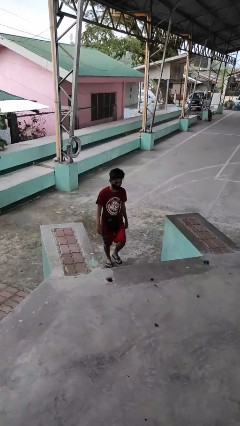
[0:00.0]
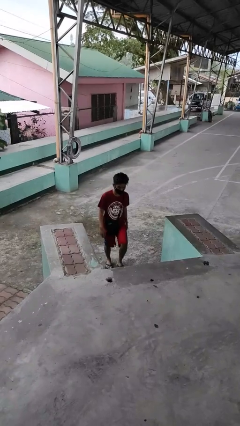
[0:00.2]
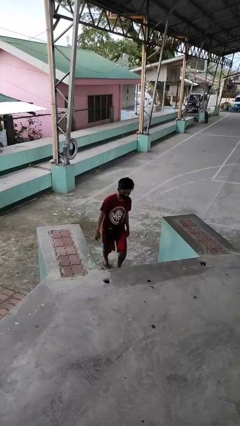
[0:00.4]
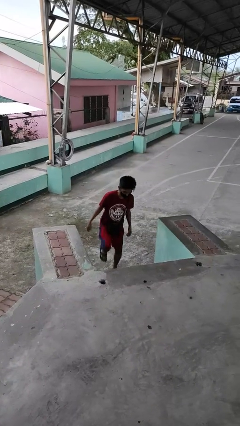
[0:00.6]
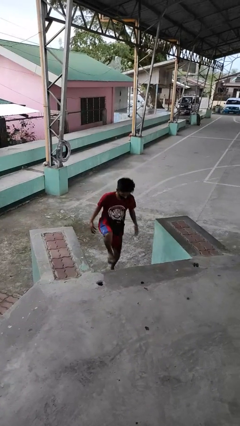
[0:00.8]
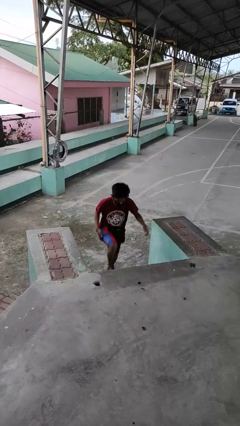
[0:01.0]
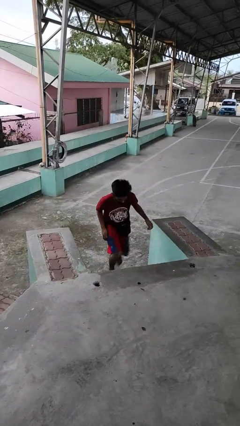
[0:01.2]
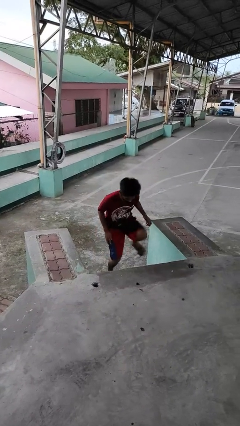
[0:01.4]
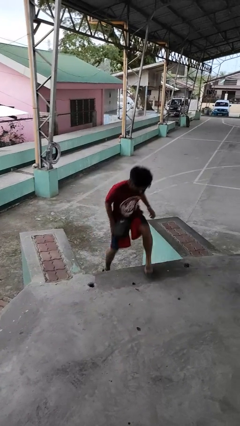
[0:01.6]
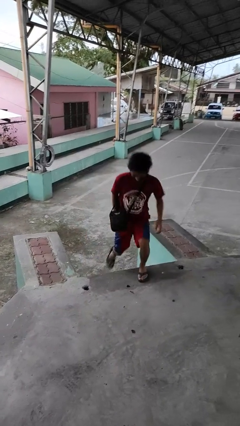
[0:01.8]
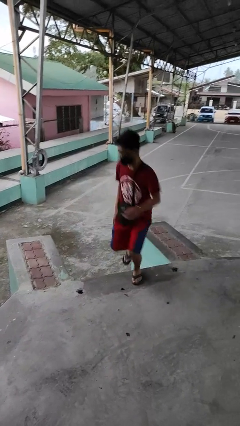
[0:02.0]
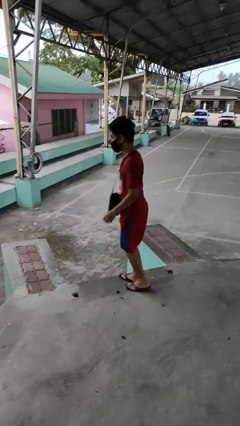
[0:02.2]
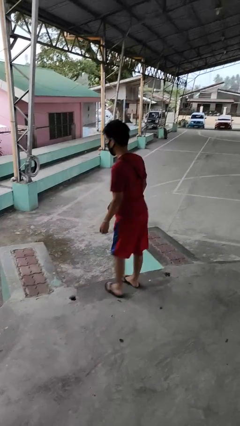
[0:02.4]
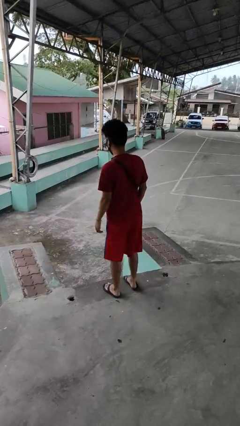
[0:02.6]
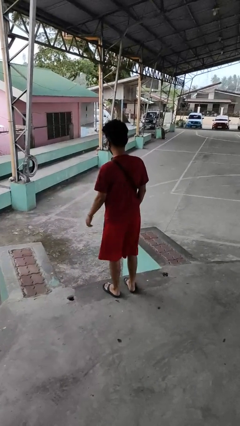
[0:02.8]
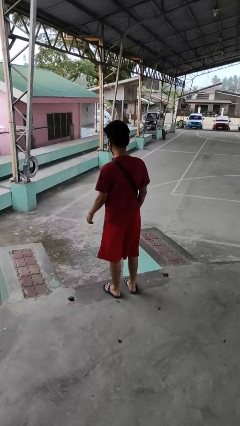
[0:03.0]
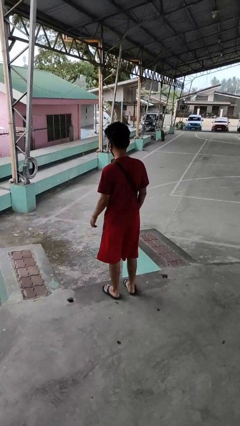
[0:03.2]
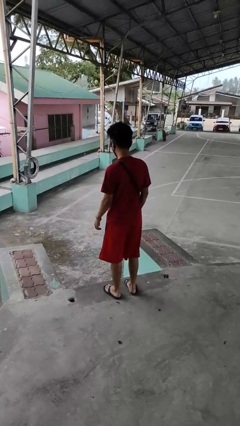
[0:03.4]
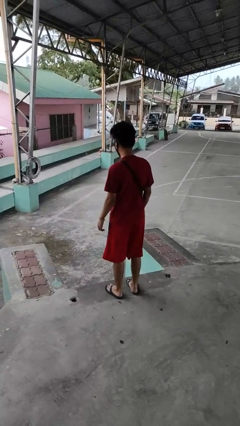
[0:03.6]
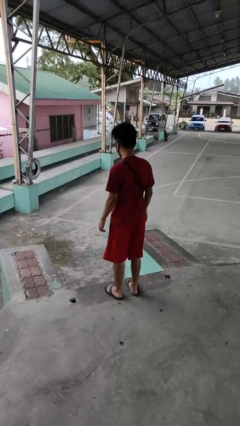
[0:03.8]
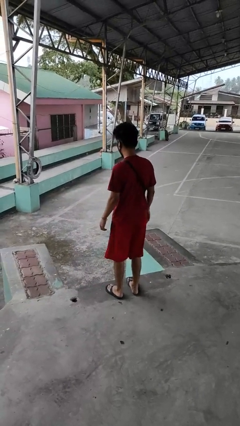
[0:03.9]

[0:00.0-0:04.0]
person climbs up stairs

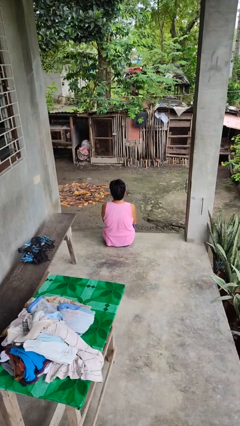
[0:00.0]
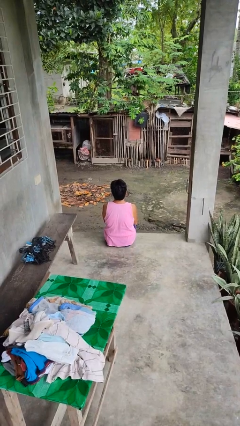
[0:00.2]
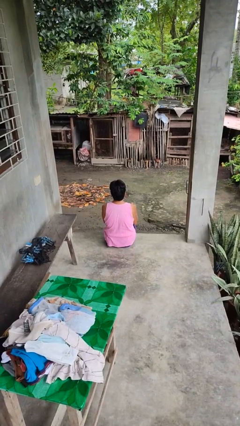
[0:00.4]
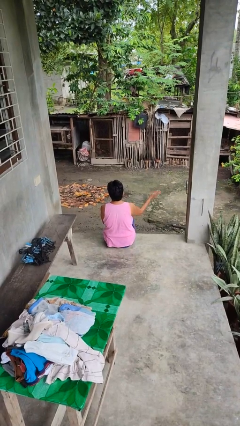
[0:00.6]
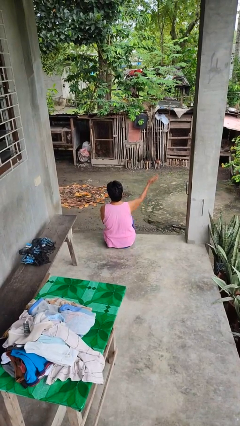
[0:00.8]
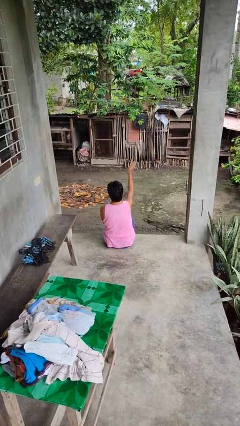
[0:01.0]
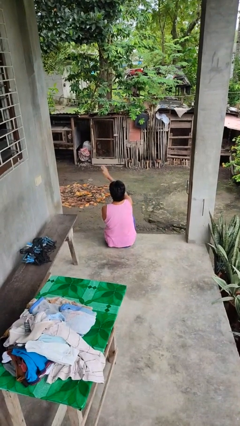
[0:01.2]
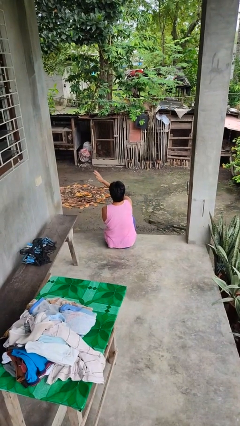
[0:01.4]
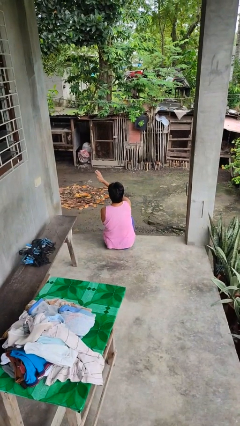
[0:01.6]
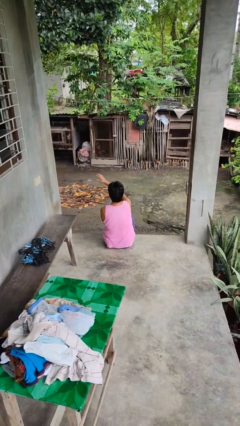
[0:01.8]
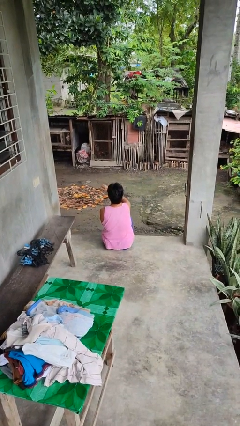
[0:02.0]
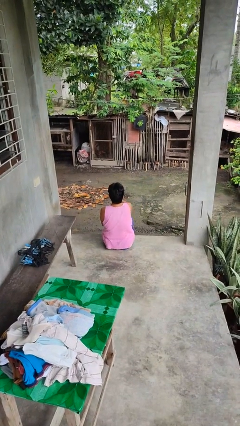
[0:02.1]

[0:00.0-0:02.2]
person gestures swipe left

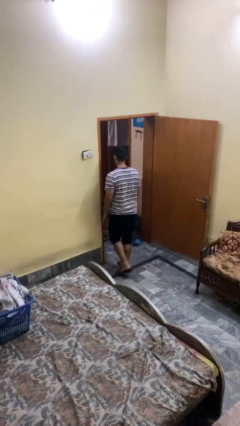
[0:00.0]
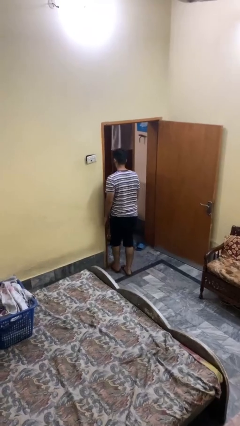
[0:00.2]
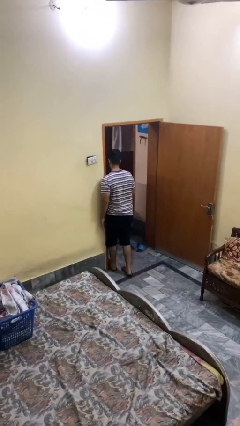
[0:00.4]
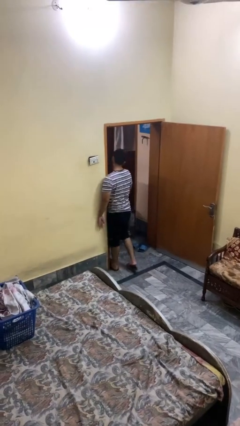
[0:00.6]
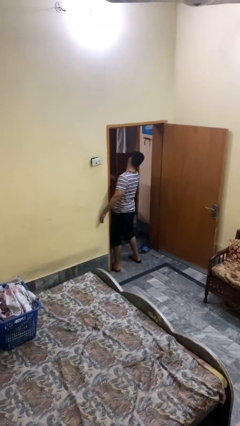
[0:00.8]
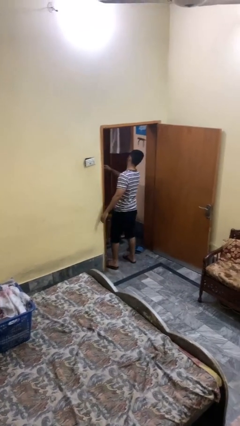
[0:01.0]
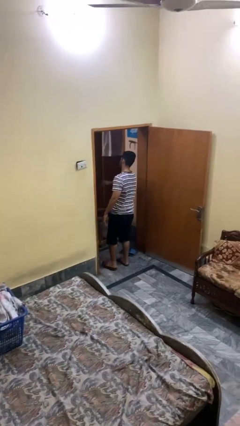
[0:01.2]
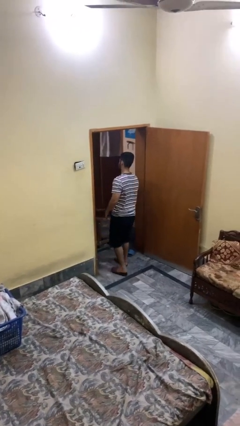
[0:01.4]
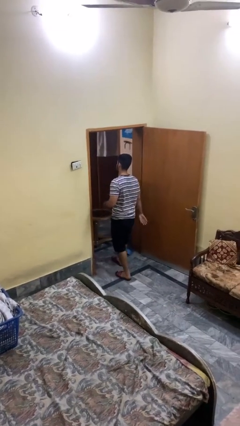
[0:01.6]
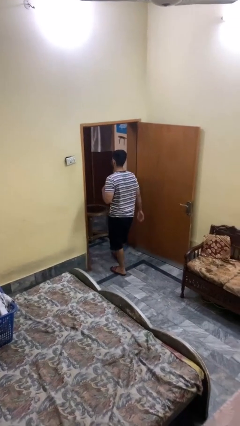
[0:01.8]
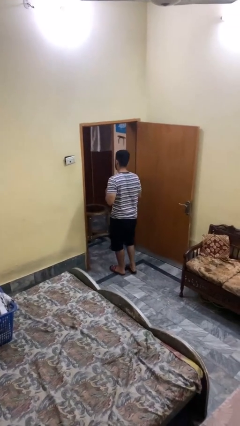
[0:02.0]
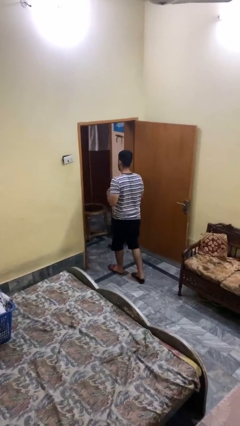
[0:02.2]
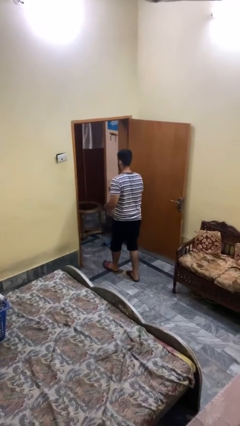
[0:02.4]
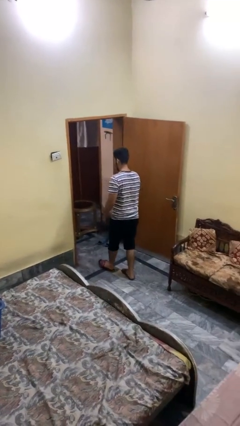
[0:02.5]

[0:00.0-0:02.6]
person bumps into wall

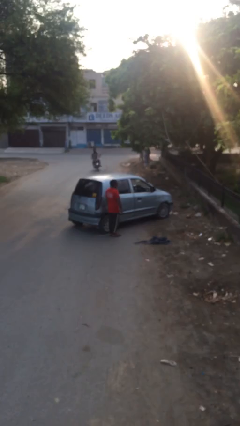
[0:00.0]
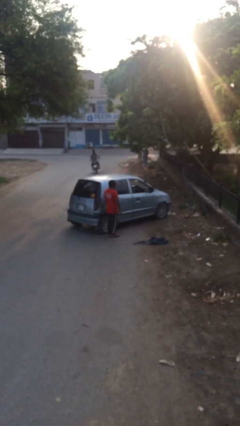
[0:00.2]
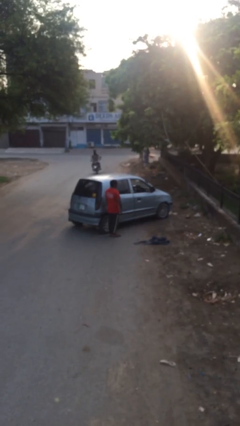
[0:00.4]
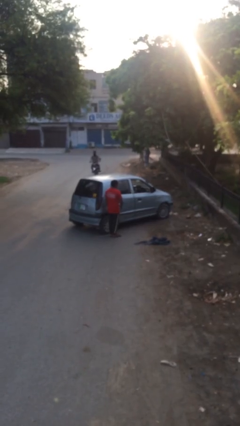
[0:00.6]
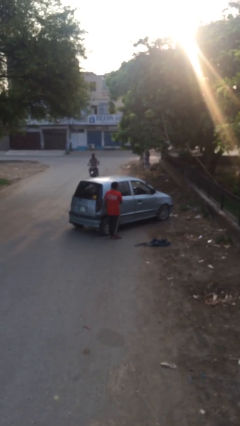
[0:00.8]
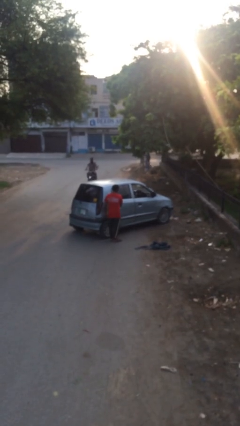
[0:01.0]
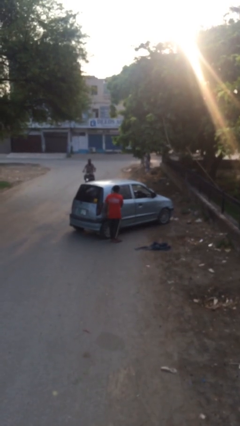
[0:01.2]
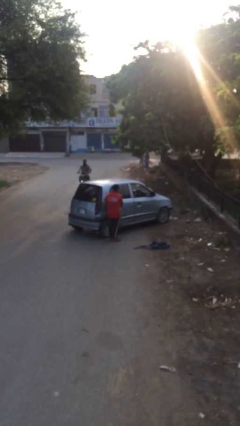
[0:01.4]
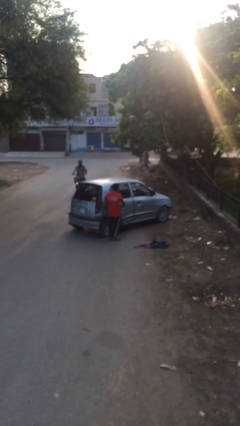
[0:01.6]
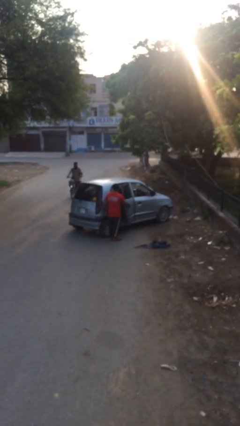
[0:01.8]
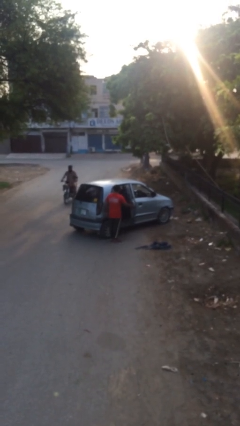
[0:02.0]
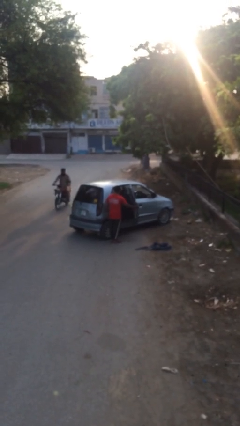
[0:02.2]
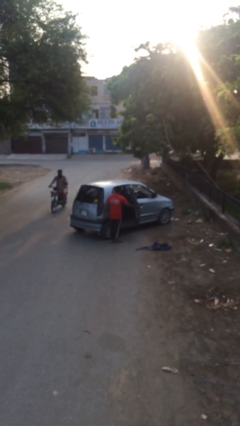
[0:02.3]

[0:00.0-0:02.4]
person opens car door

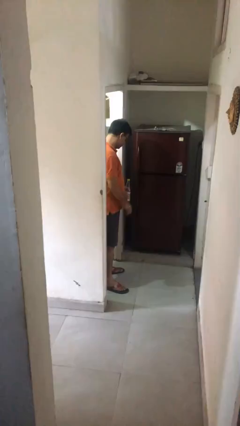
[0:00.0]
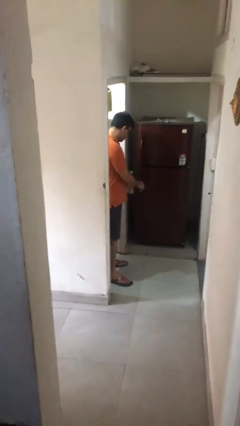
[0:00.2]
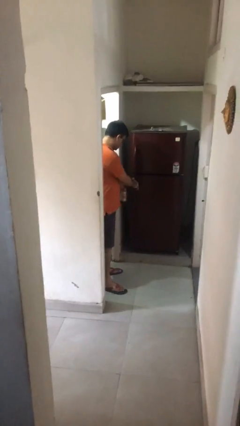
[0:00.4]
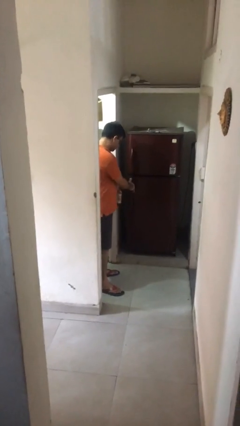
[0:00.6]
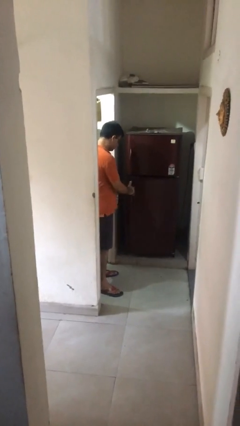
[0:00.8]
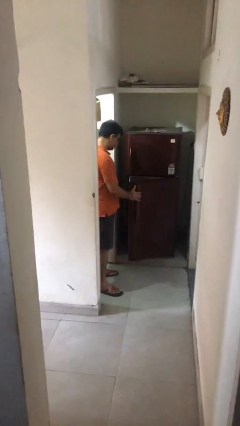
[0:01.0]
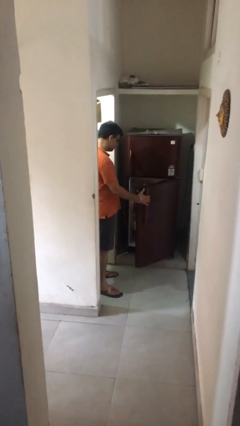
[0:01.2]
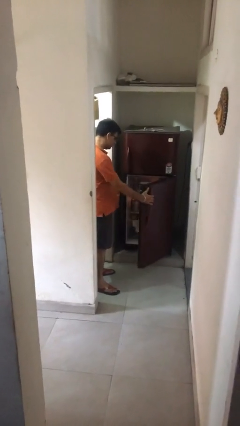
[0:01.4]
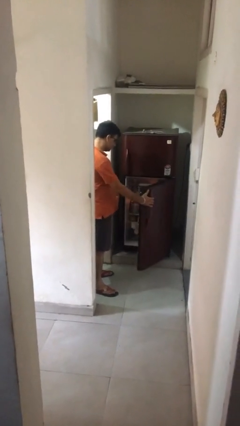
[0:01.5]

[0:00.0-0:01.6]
person opens refrigerator

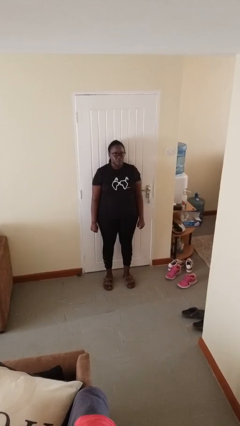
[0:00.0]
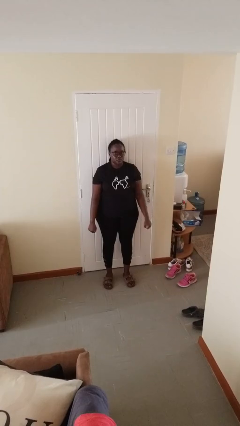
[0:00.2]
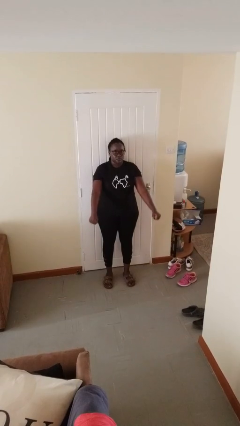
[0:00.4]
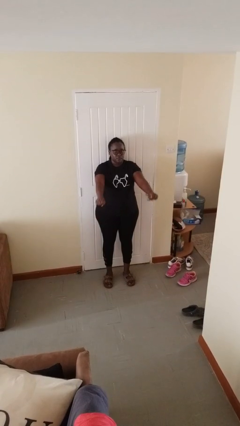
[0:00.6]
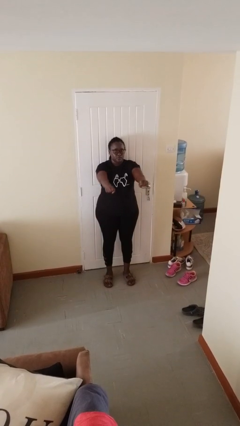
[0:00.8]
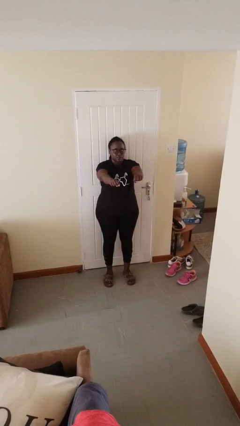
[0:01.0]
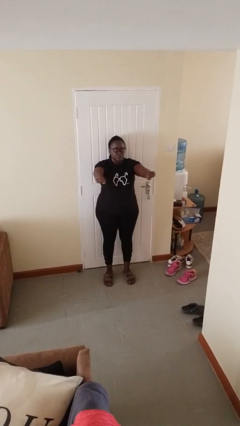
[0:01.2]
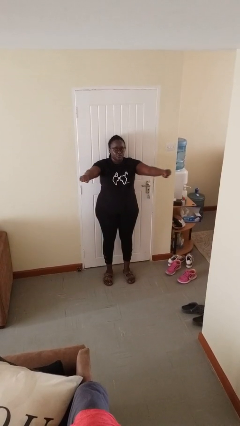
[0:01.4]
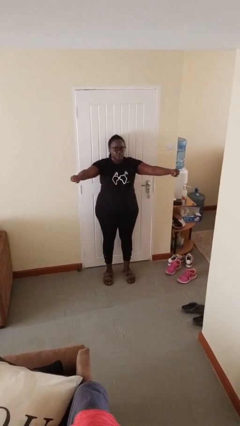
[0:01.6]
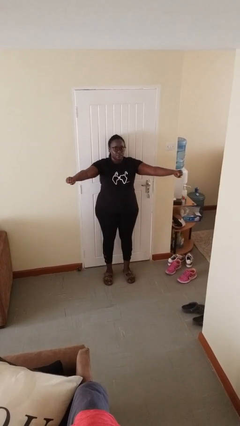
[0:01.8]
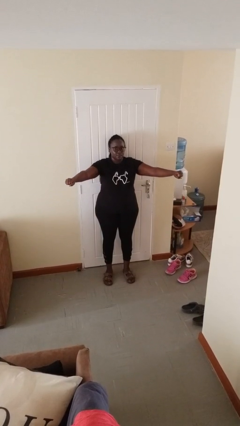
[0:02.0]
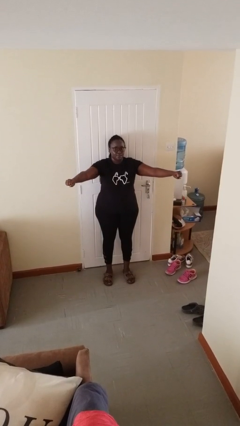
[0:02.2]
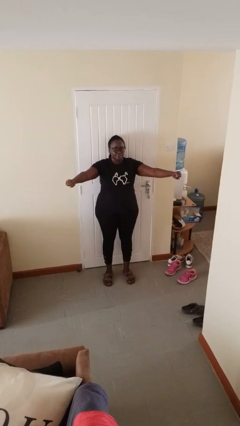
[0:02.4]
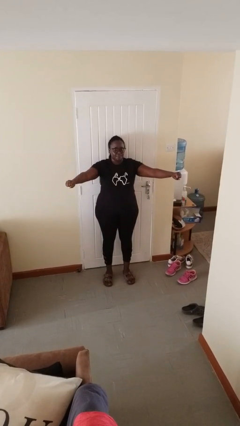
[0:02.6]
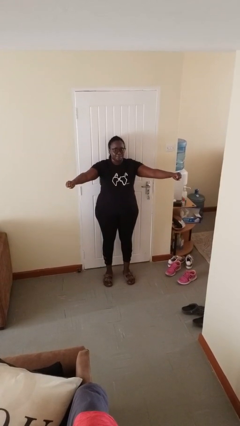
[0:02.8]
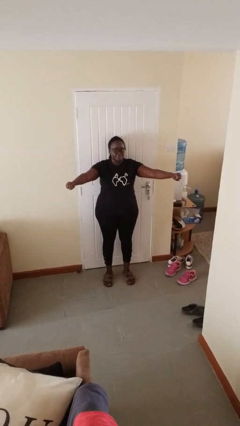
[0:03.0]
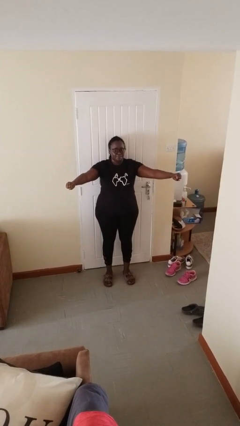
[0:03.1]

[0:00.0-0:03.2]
person gestures zoom in

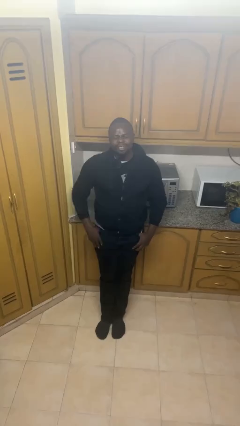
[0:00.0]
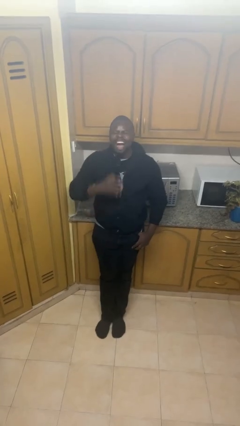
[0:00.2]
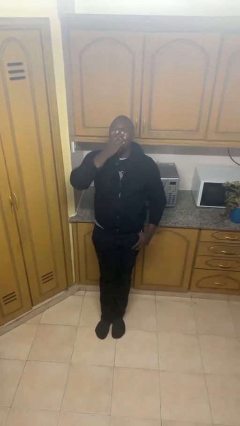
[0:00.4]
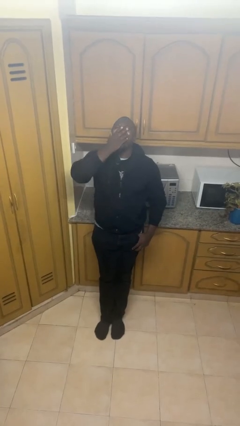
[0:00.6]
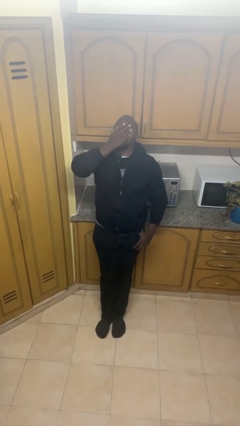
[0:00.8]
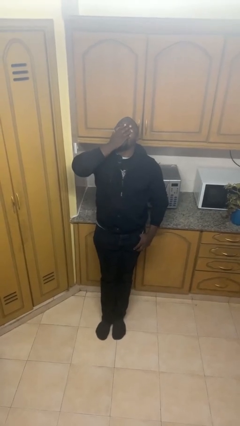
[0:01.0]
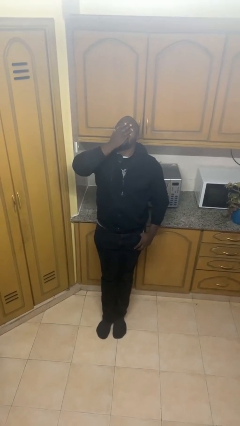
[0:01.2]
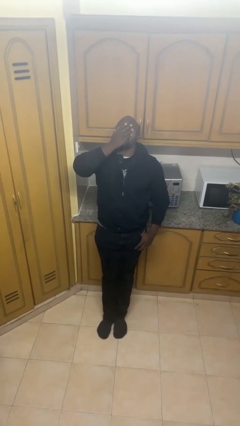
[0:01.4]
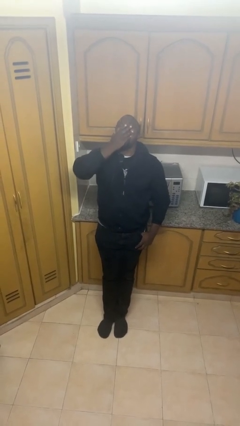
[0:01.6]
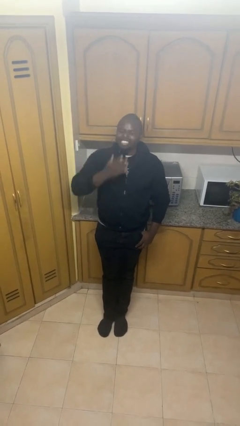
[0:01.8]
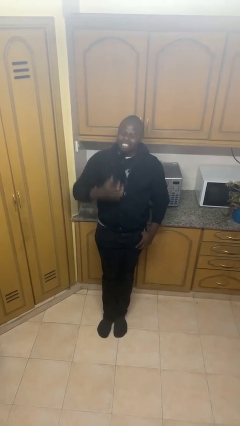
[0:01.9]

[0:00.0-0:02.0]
person yawns
